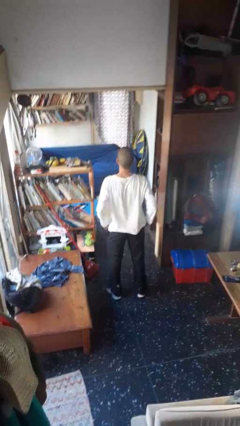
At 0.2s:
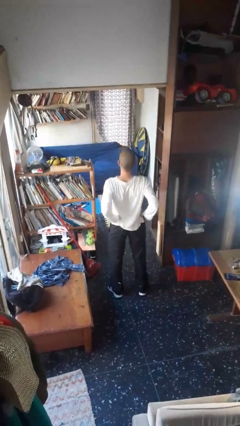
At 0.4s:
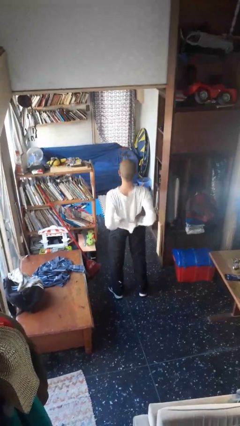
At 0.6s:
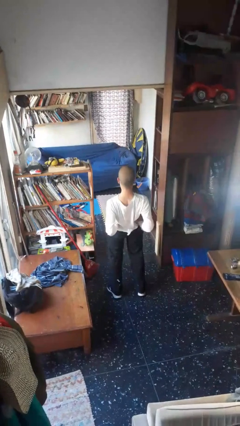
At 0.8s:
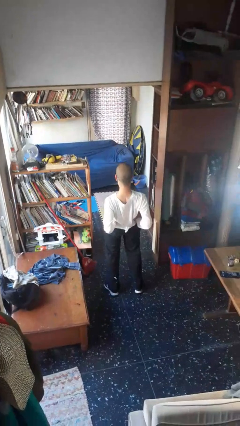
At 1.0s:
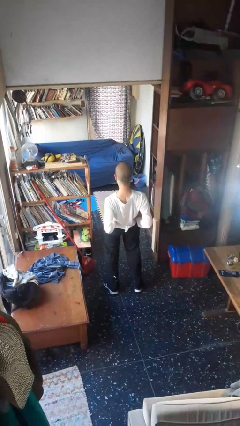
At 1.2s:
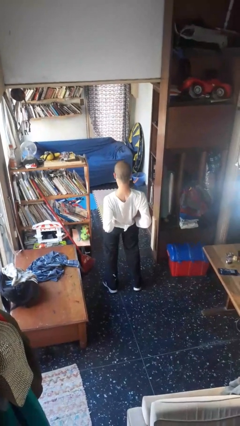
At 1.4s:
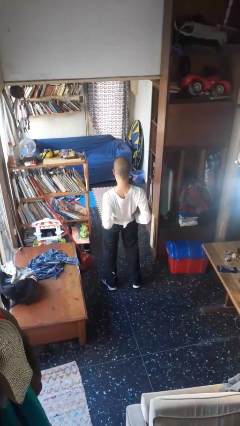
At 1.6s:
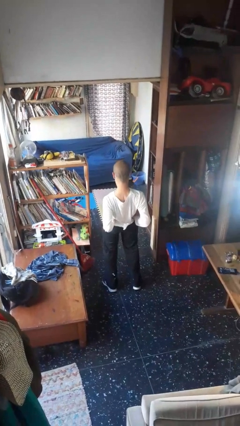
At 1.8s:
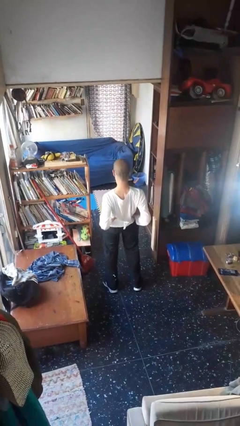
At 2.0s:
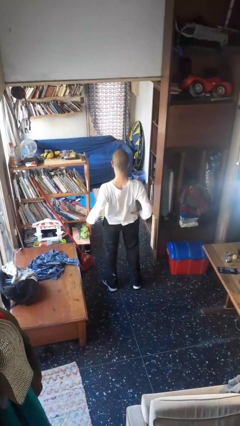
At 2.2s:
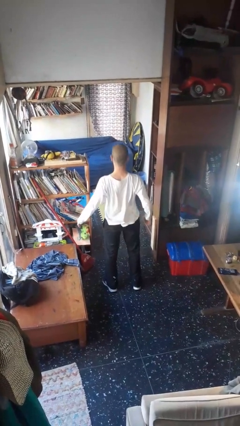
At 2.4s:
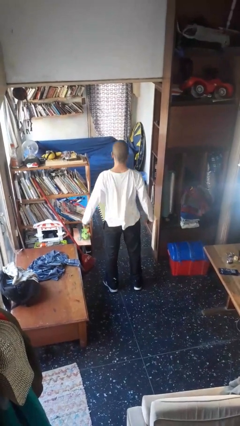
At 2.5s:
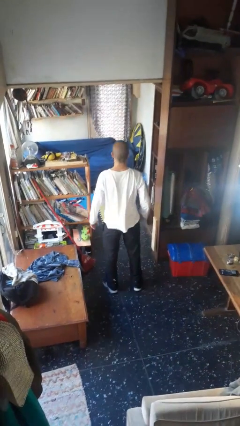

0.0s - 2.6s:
person stretches back

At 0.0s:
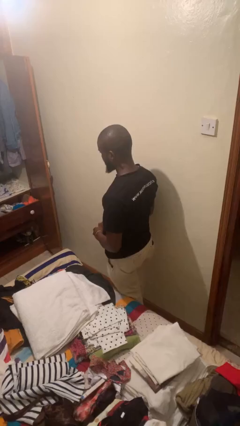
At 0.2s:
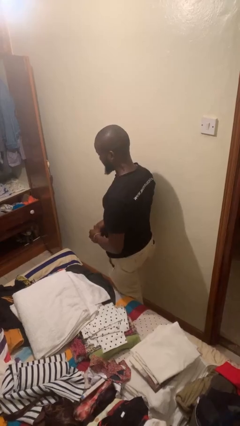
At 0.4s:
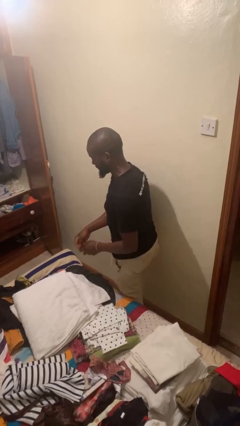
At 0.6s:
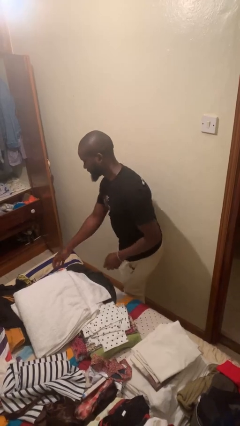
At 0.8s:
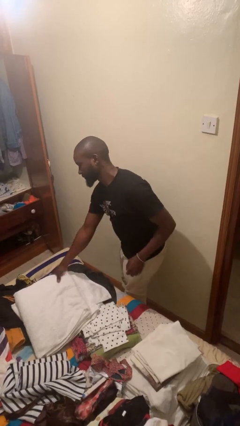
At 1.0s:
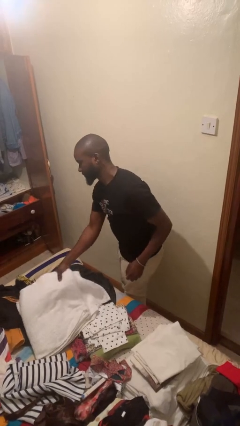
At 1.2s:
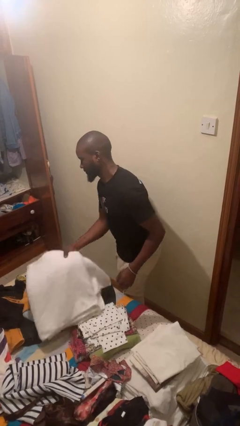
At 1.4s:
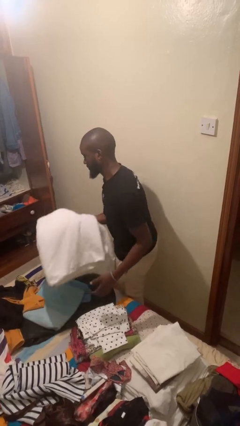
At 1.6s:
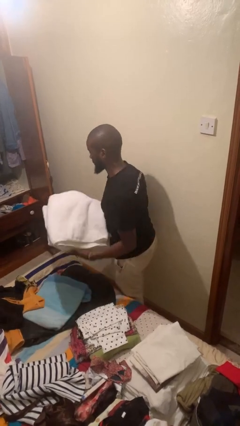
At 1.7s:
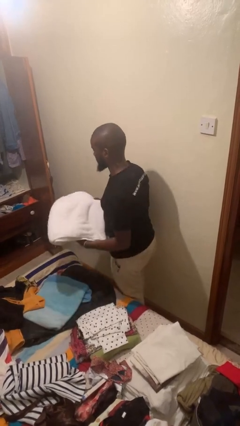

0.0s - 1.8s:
person picks up object from bed

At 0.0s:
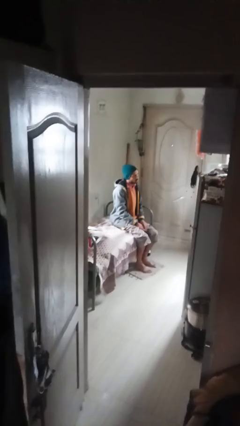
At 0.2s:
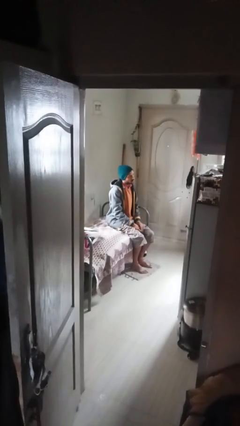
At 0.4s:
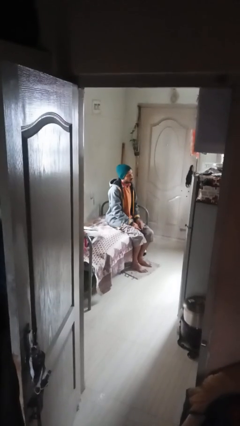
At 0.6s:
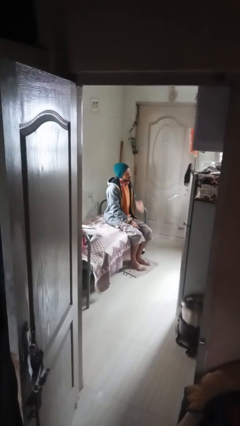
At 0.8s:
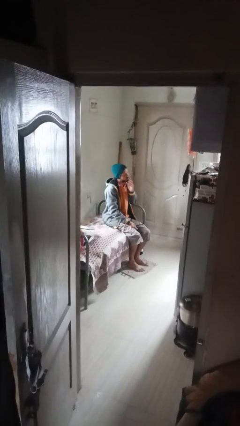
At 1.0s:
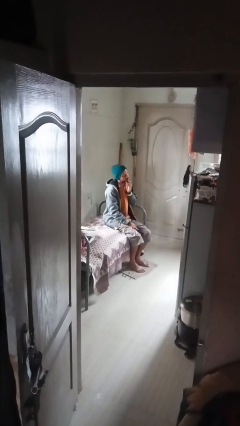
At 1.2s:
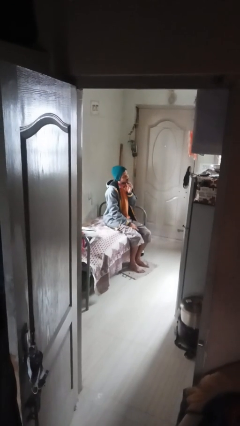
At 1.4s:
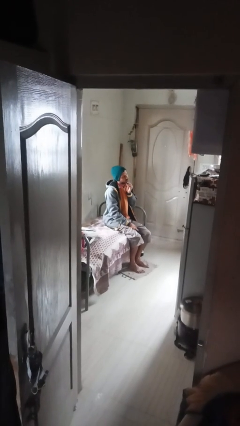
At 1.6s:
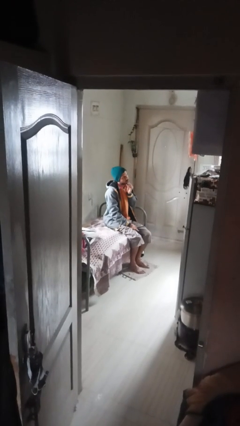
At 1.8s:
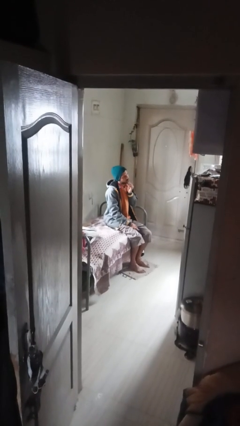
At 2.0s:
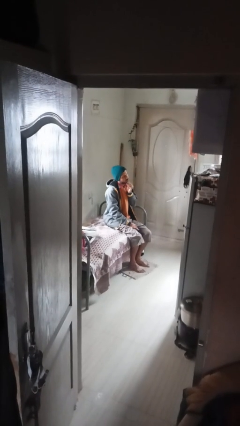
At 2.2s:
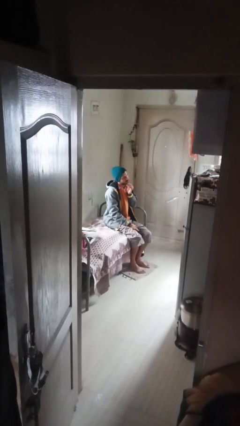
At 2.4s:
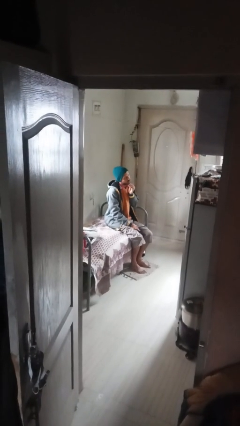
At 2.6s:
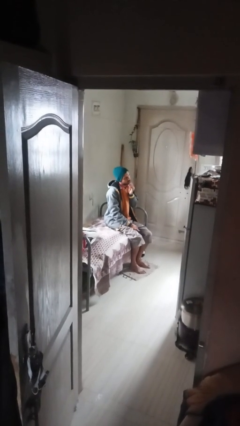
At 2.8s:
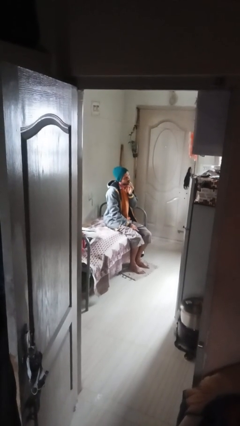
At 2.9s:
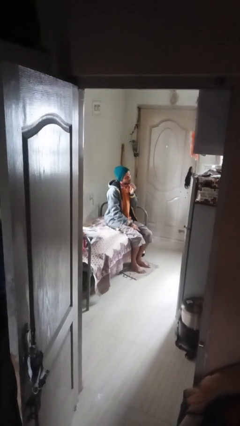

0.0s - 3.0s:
person strokes chin

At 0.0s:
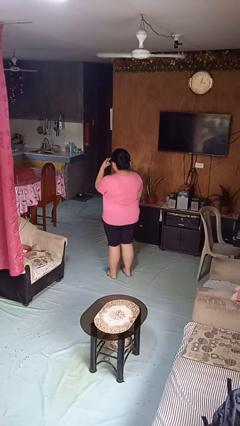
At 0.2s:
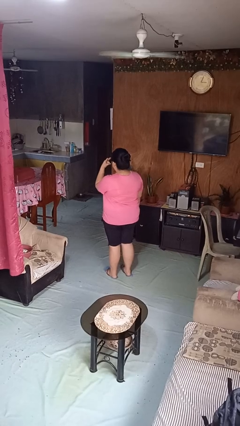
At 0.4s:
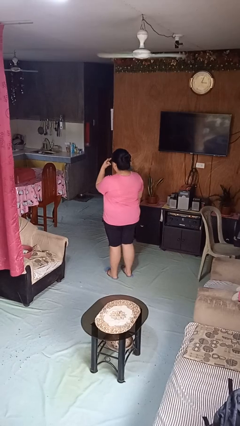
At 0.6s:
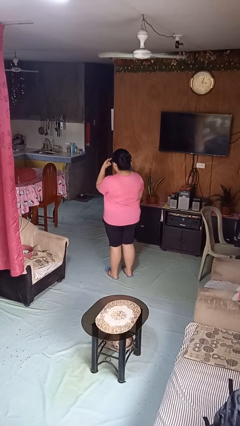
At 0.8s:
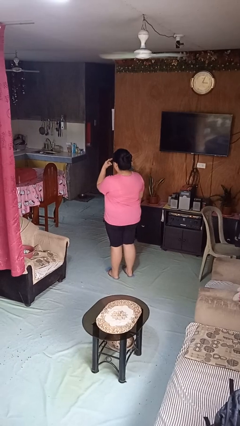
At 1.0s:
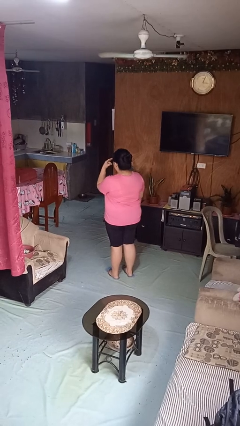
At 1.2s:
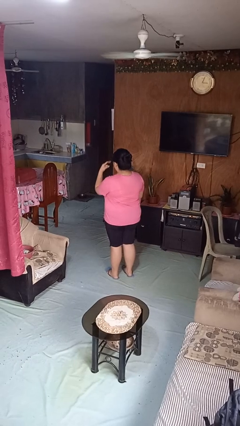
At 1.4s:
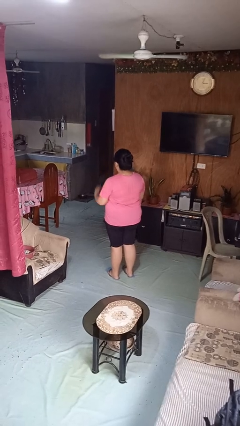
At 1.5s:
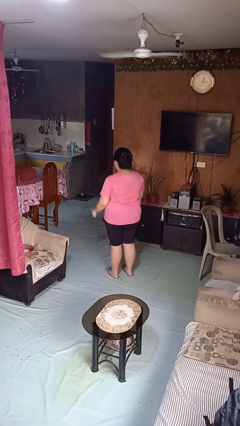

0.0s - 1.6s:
person gestures watch closely

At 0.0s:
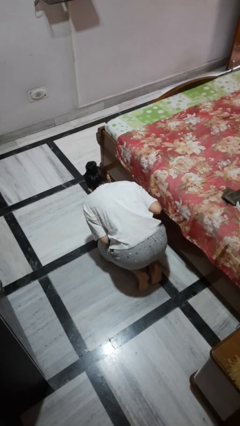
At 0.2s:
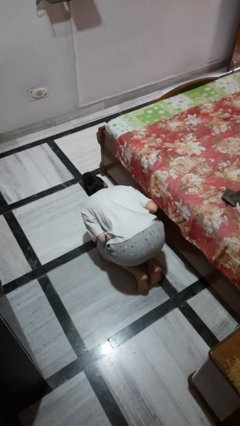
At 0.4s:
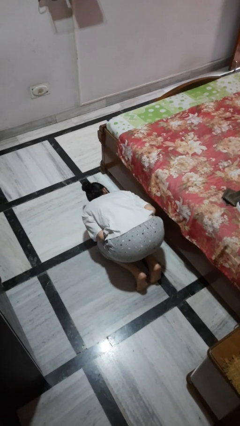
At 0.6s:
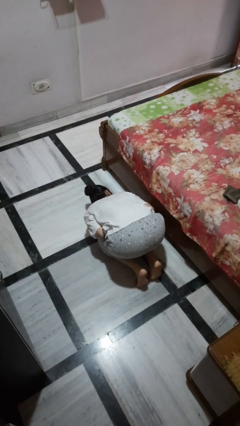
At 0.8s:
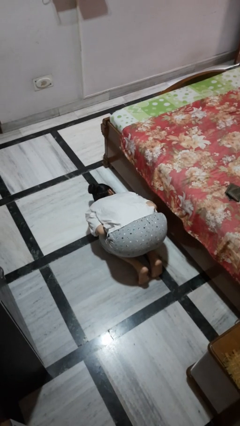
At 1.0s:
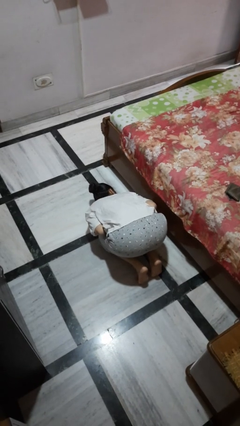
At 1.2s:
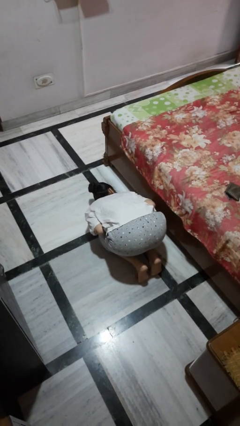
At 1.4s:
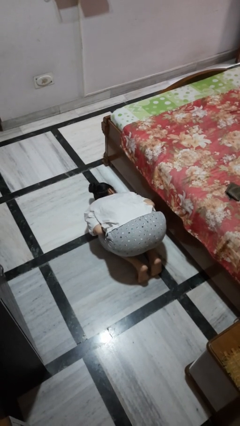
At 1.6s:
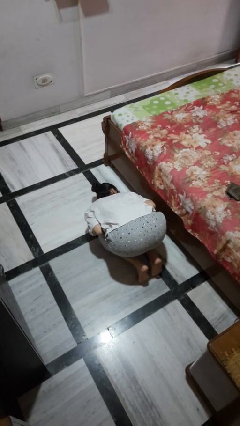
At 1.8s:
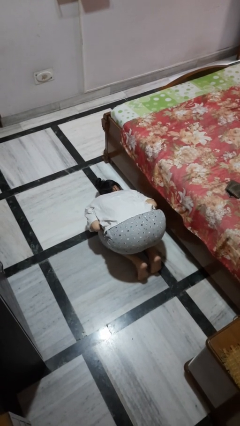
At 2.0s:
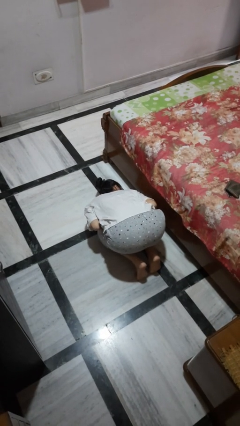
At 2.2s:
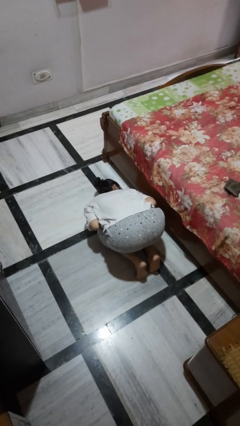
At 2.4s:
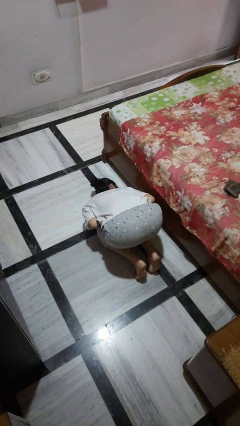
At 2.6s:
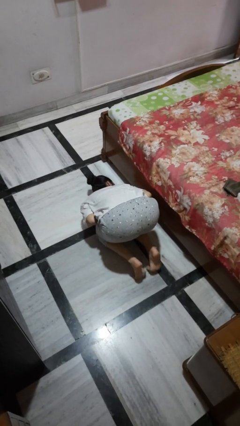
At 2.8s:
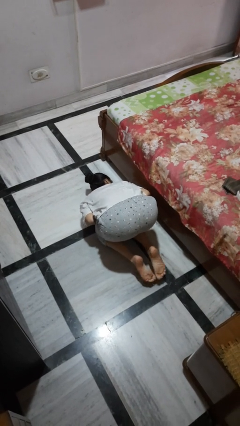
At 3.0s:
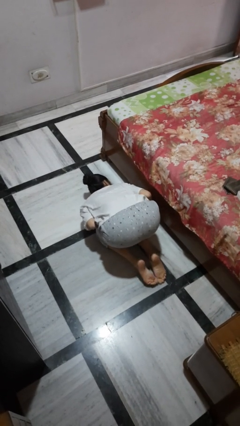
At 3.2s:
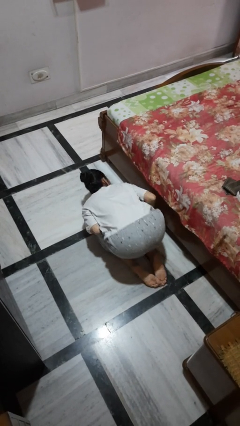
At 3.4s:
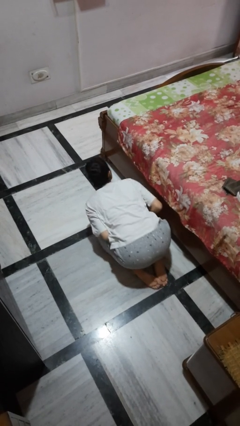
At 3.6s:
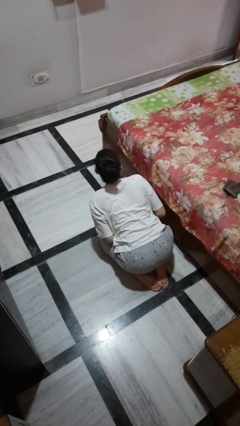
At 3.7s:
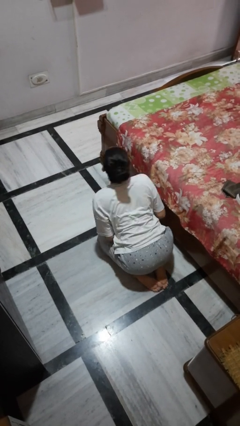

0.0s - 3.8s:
person searches under bed

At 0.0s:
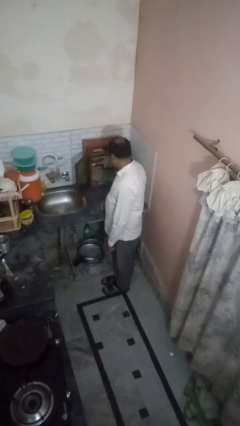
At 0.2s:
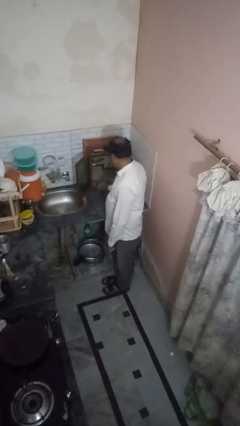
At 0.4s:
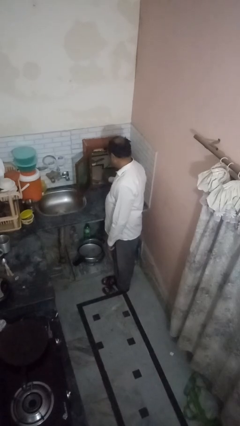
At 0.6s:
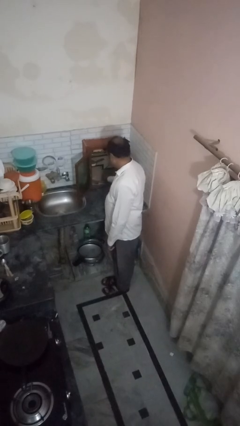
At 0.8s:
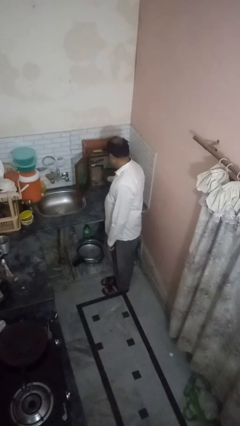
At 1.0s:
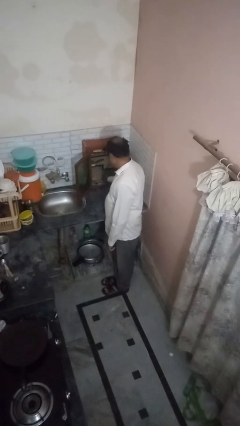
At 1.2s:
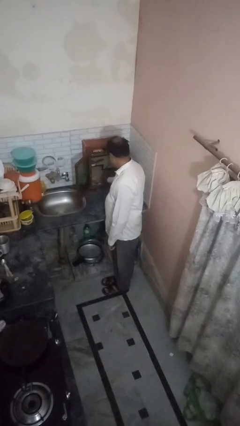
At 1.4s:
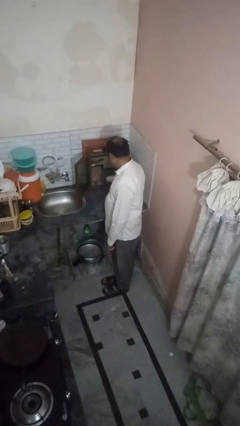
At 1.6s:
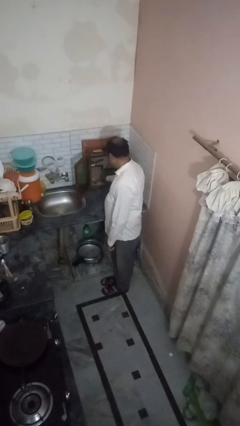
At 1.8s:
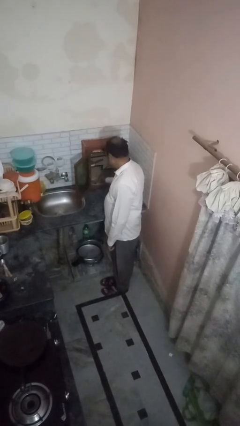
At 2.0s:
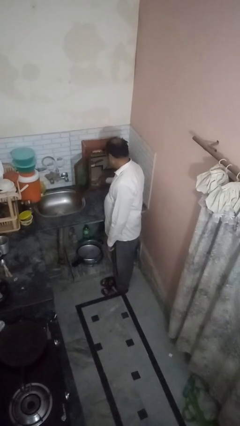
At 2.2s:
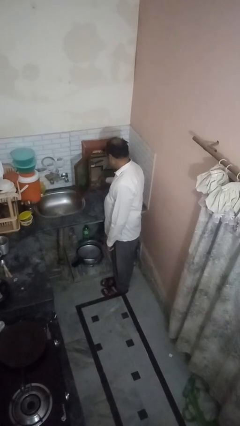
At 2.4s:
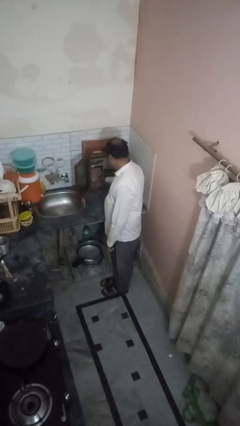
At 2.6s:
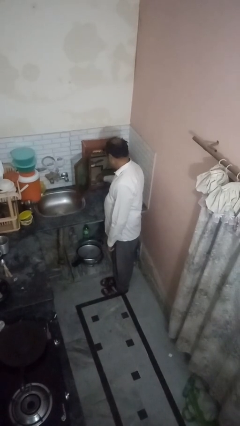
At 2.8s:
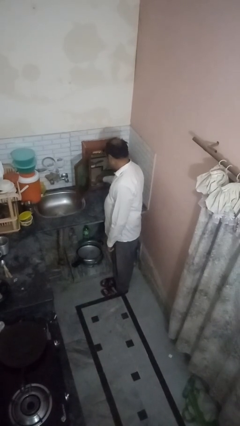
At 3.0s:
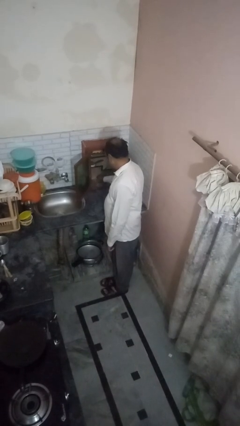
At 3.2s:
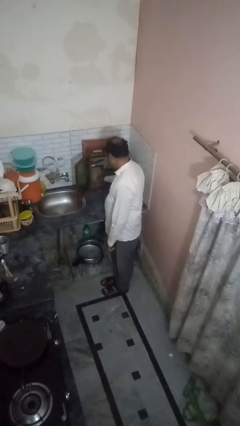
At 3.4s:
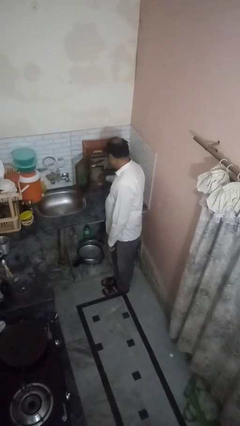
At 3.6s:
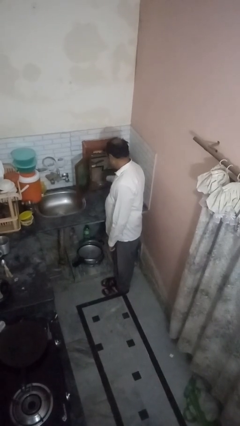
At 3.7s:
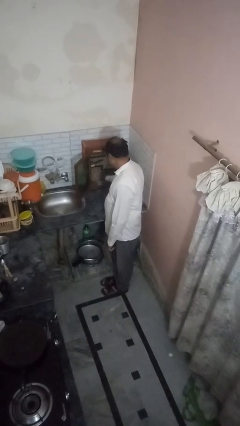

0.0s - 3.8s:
person searches in kitchen drawer

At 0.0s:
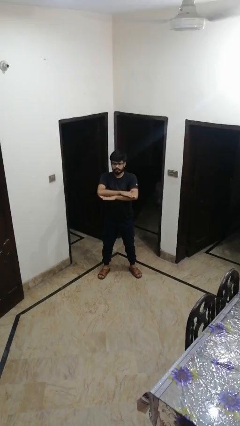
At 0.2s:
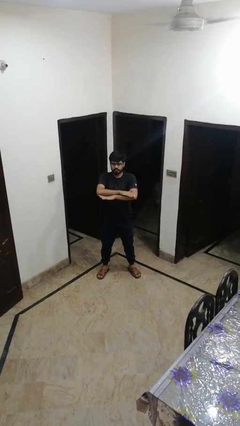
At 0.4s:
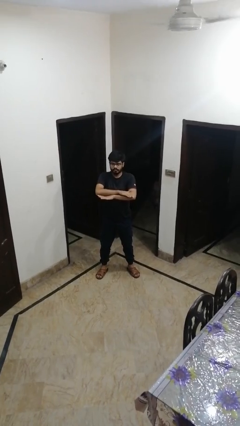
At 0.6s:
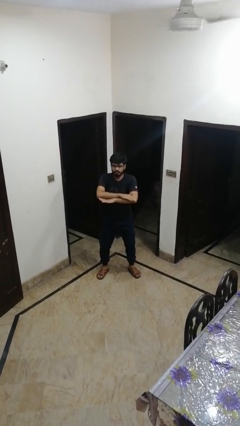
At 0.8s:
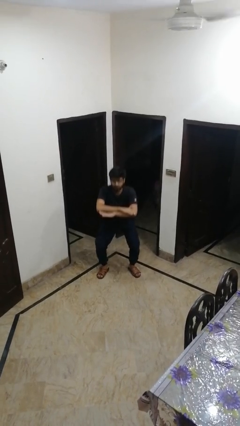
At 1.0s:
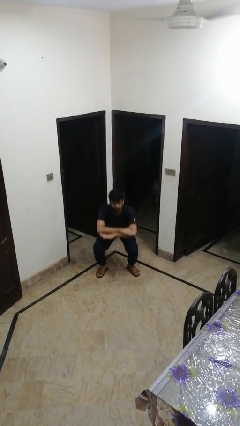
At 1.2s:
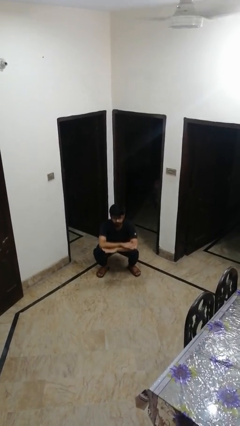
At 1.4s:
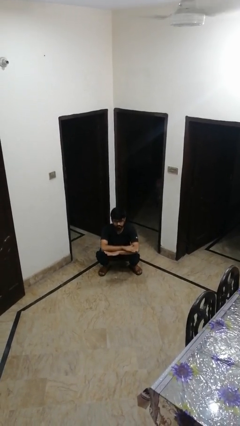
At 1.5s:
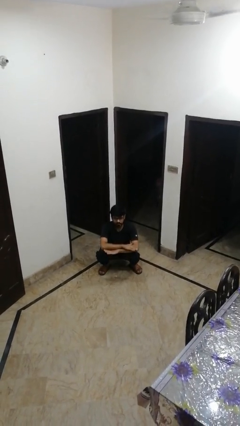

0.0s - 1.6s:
person squats
